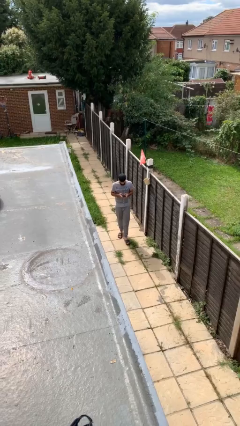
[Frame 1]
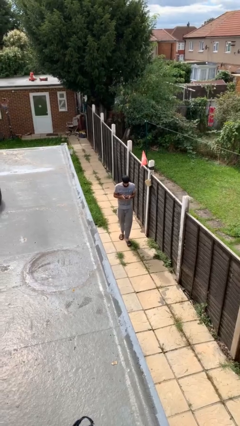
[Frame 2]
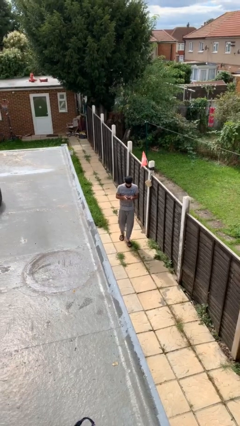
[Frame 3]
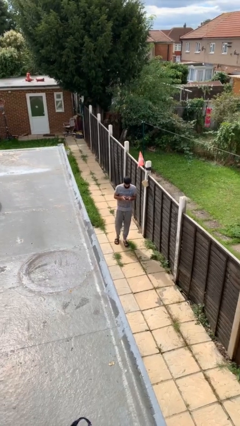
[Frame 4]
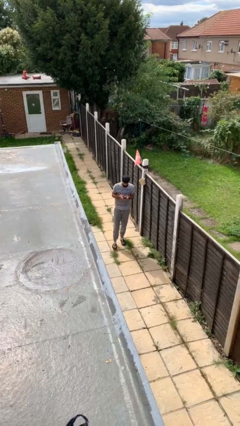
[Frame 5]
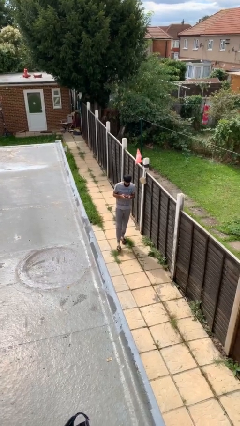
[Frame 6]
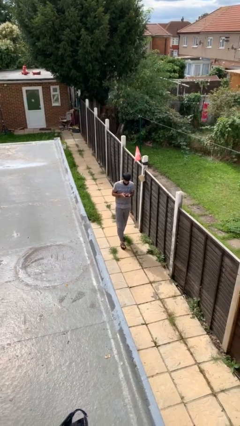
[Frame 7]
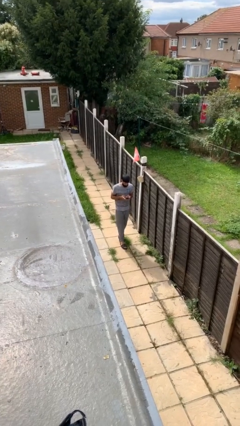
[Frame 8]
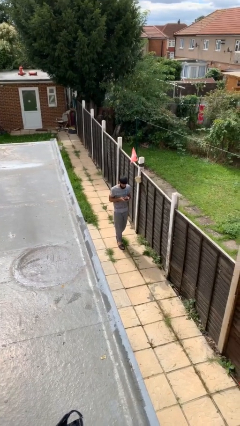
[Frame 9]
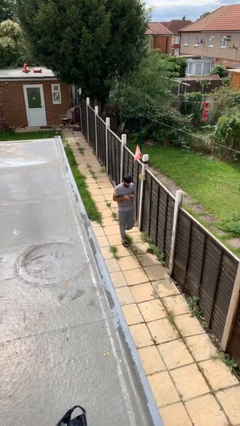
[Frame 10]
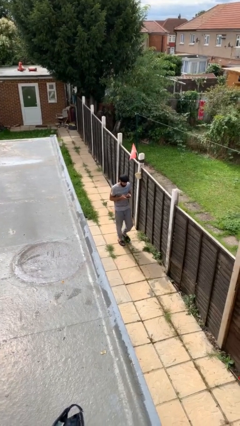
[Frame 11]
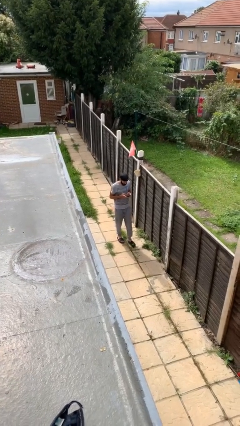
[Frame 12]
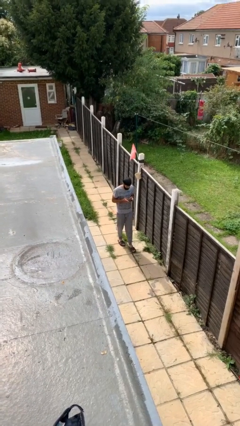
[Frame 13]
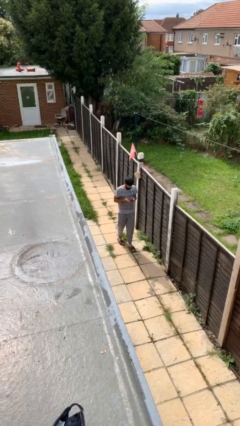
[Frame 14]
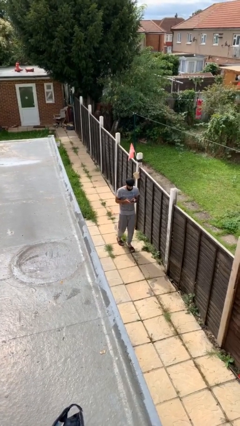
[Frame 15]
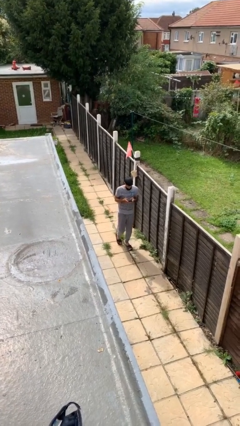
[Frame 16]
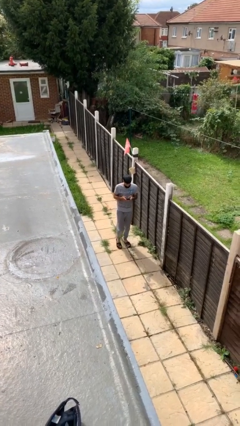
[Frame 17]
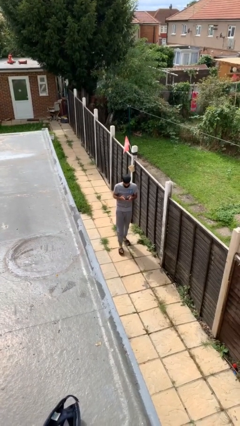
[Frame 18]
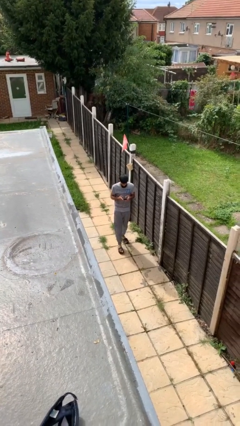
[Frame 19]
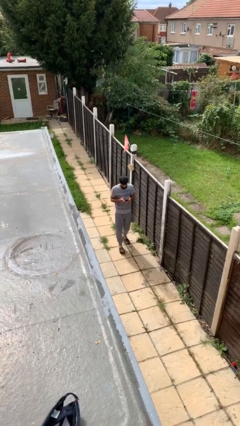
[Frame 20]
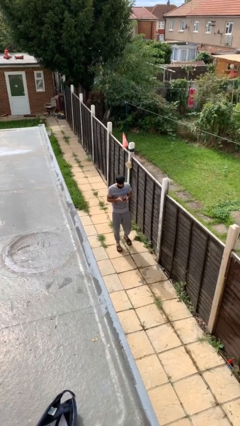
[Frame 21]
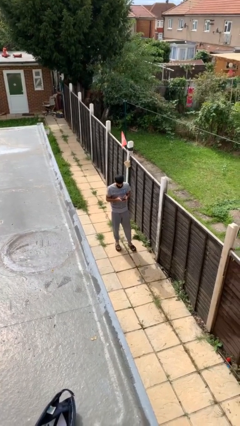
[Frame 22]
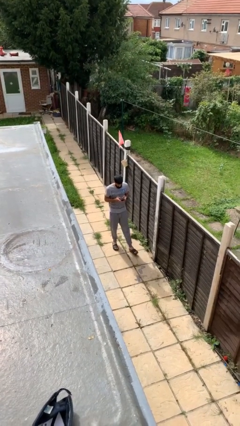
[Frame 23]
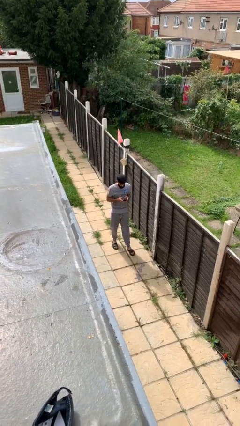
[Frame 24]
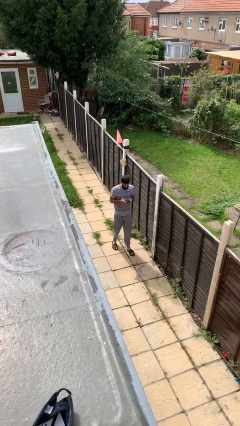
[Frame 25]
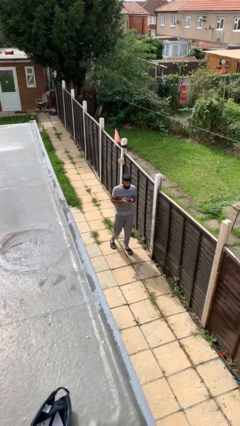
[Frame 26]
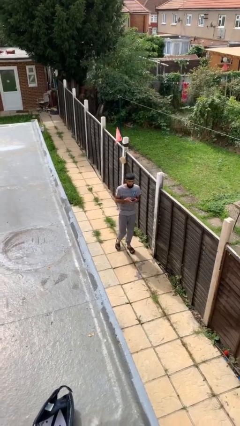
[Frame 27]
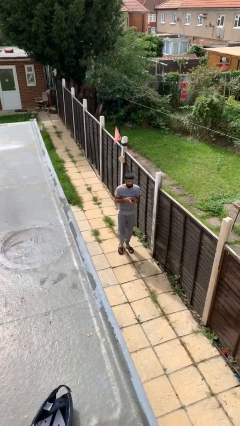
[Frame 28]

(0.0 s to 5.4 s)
person texts on phone

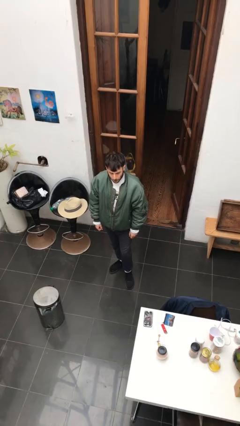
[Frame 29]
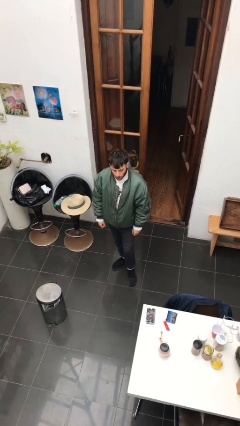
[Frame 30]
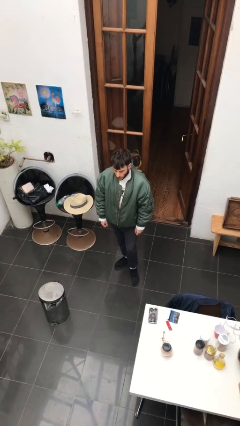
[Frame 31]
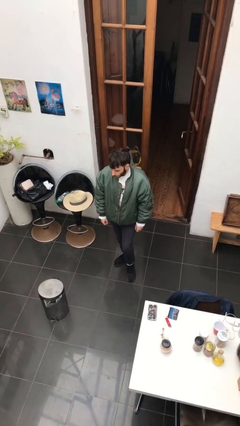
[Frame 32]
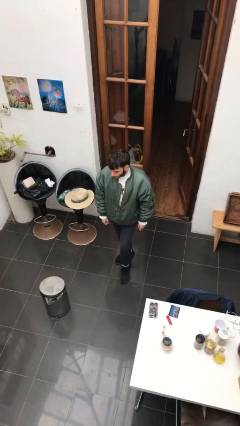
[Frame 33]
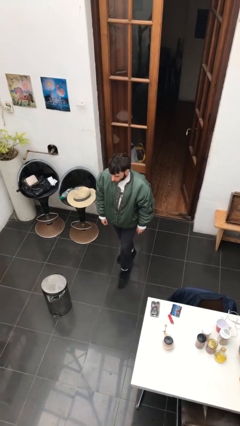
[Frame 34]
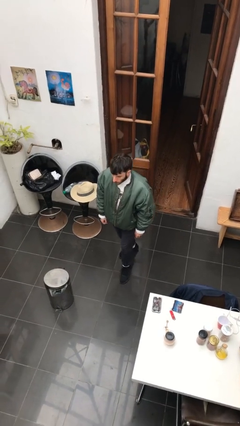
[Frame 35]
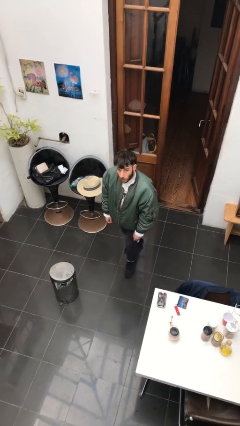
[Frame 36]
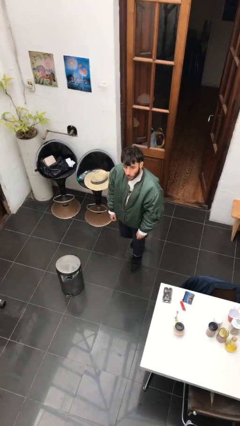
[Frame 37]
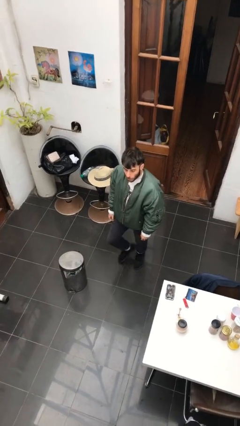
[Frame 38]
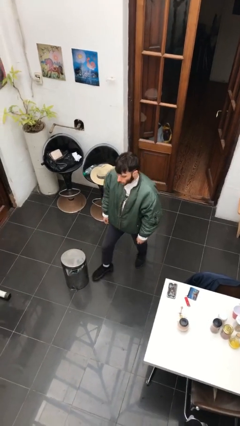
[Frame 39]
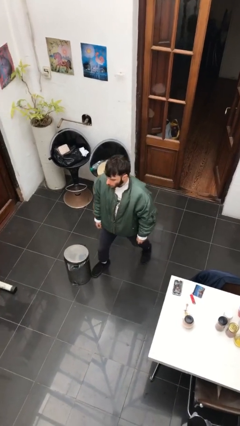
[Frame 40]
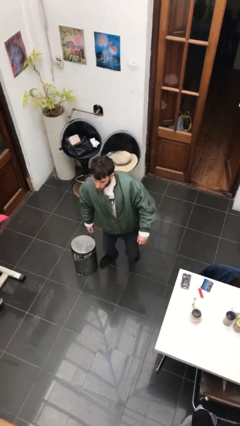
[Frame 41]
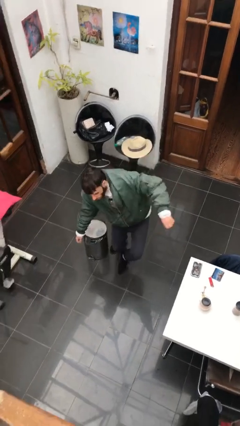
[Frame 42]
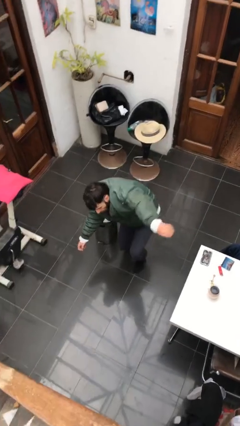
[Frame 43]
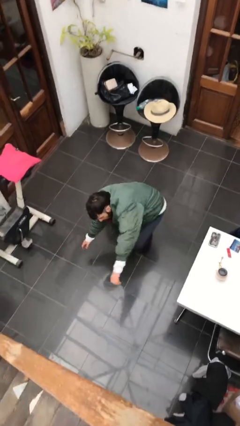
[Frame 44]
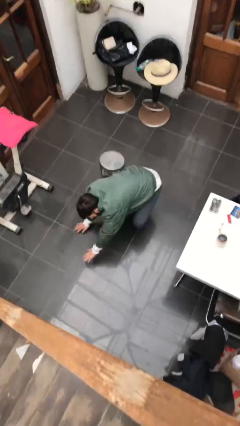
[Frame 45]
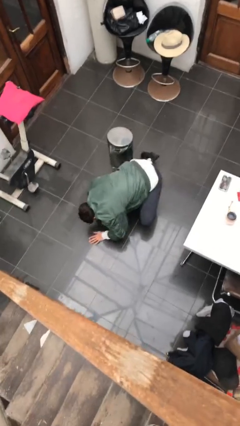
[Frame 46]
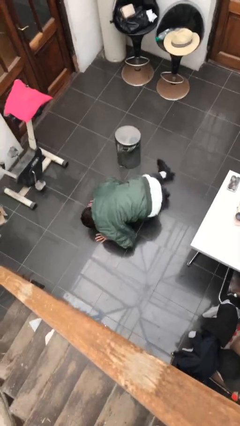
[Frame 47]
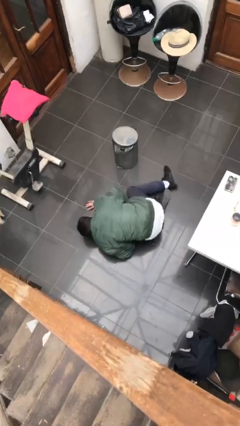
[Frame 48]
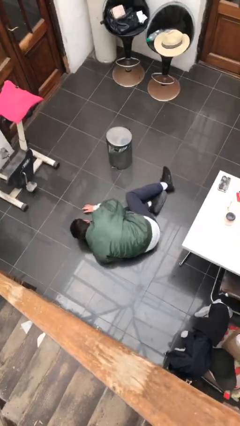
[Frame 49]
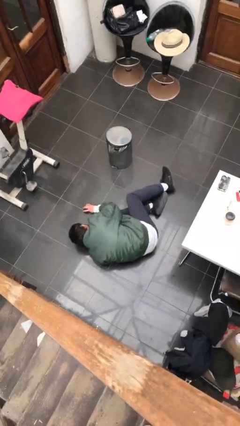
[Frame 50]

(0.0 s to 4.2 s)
person trips on object on floor

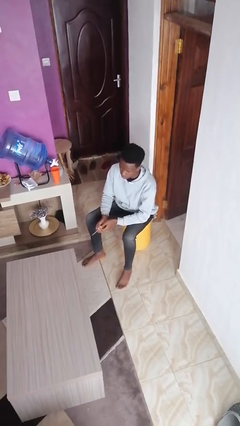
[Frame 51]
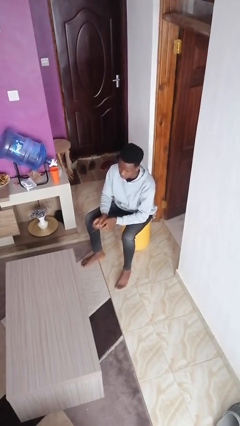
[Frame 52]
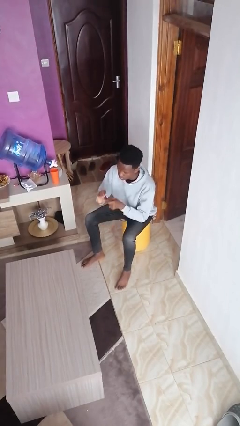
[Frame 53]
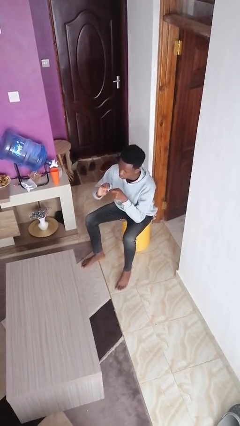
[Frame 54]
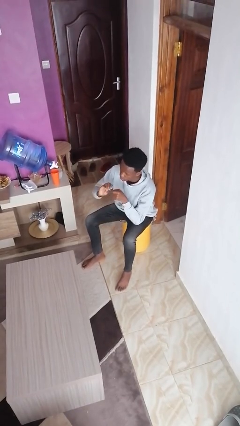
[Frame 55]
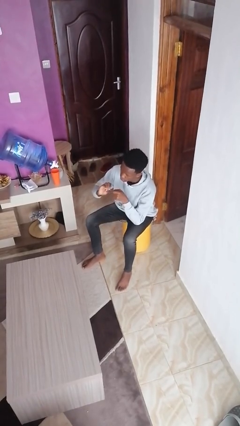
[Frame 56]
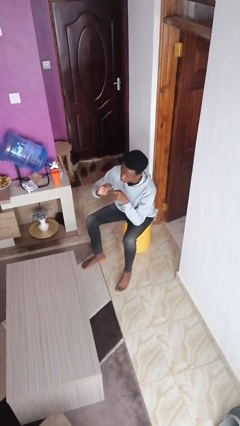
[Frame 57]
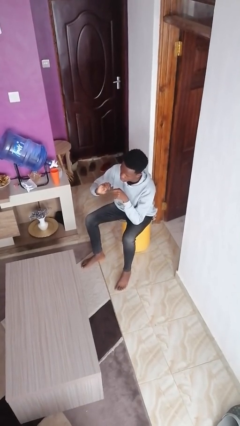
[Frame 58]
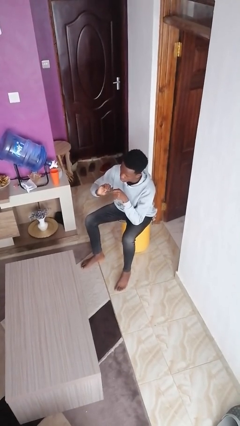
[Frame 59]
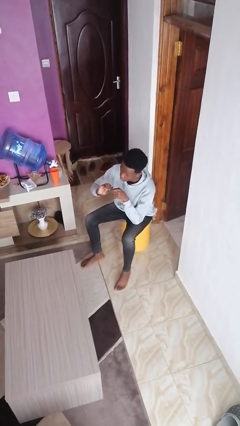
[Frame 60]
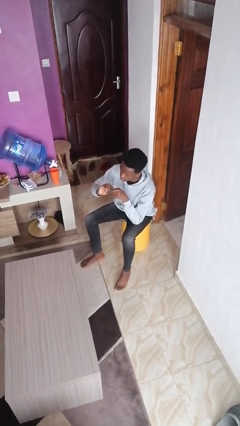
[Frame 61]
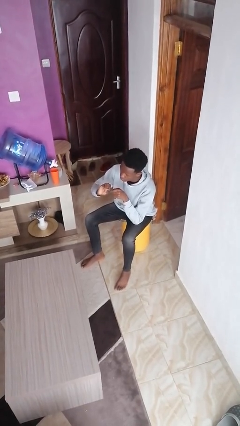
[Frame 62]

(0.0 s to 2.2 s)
person files fingernails

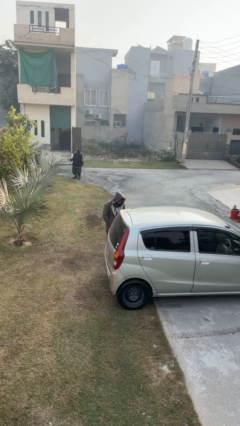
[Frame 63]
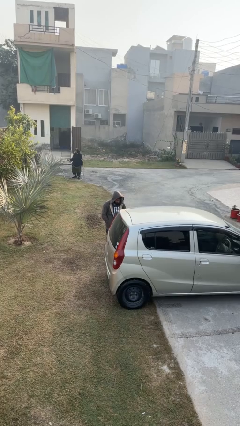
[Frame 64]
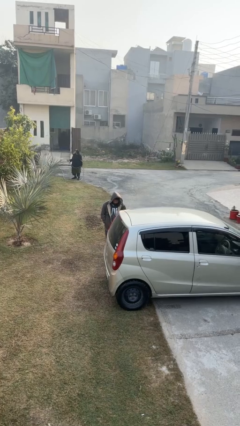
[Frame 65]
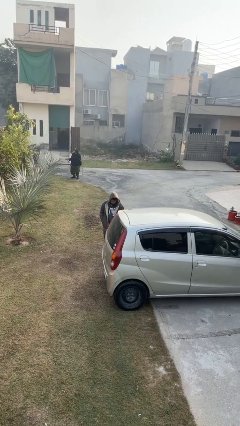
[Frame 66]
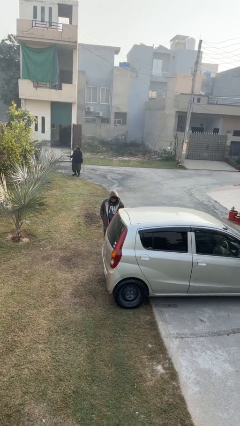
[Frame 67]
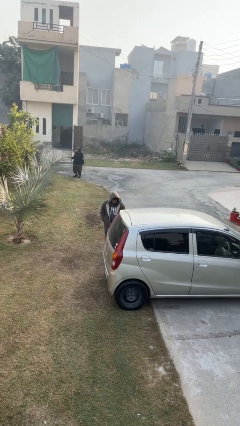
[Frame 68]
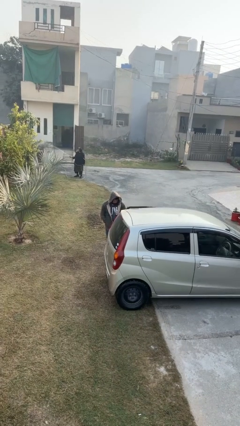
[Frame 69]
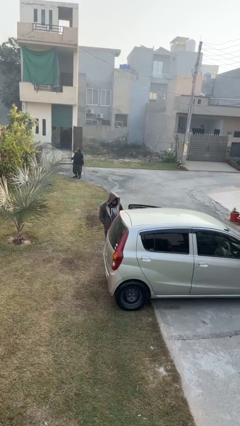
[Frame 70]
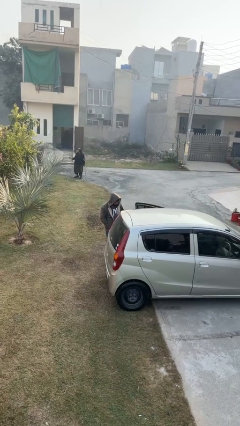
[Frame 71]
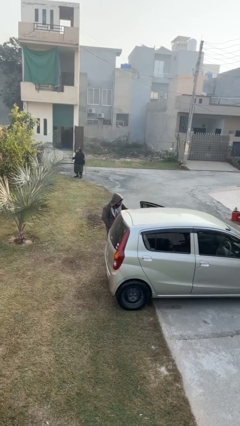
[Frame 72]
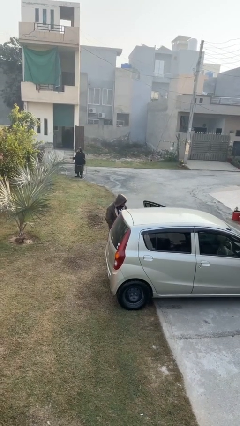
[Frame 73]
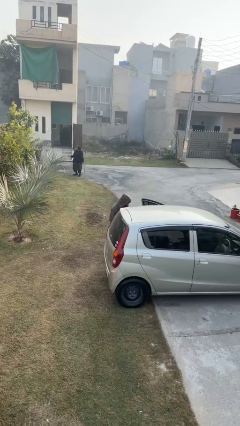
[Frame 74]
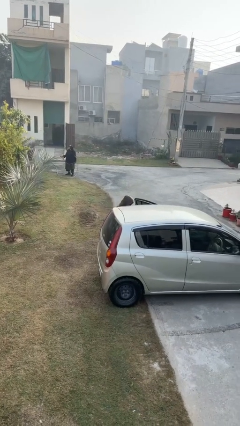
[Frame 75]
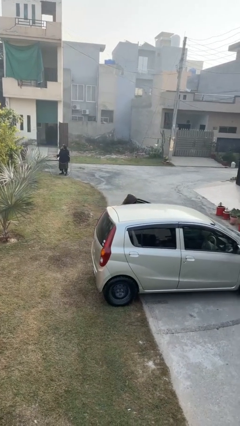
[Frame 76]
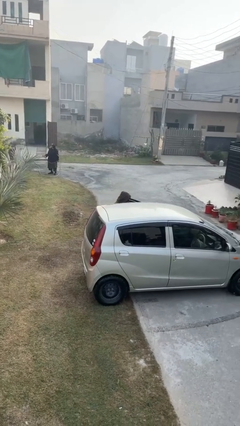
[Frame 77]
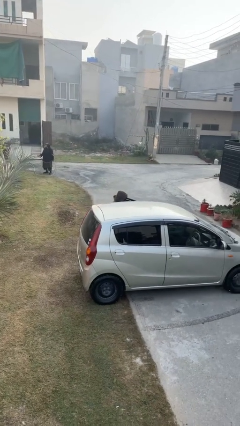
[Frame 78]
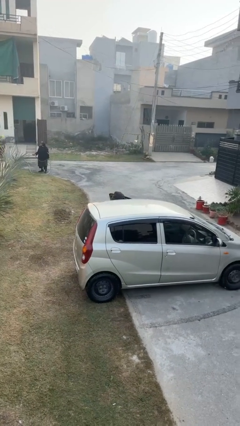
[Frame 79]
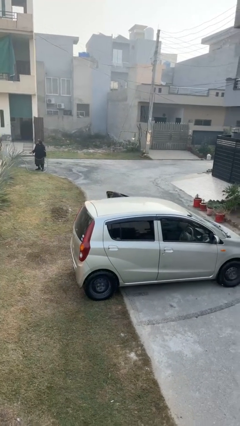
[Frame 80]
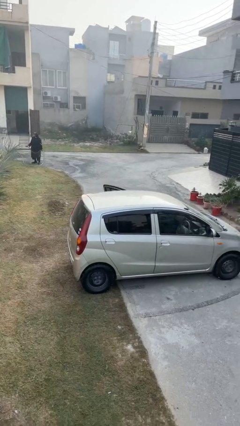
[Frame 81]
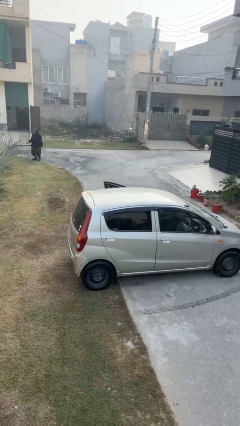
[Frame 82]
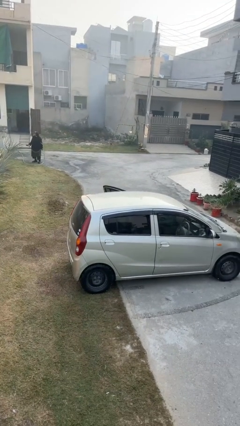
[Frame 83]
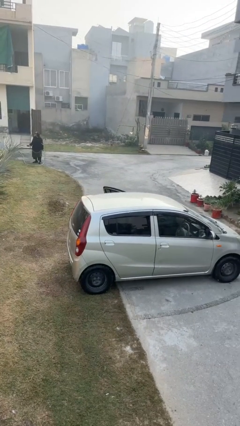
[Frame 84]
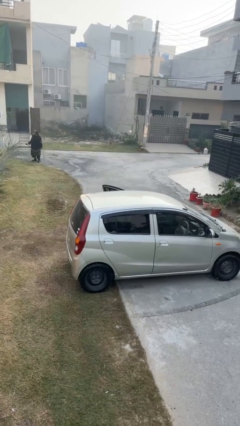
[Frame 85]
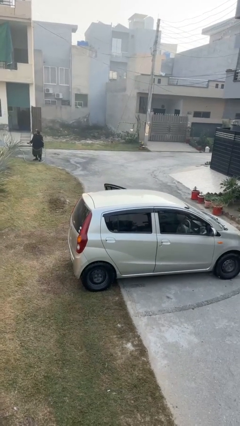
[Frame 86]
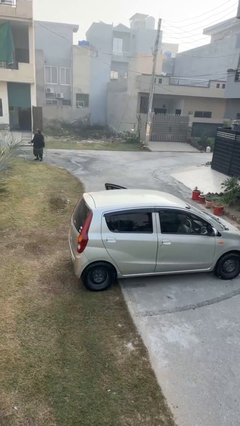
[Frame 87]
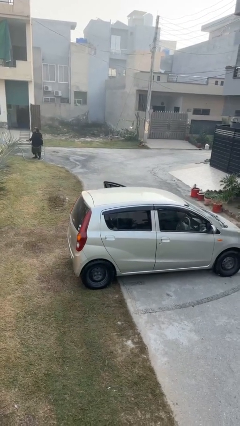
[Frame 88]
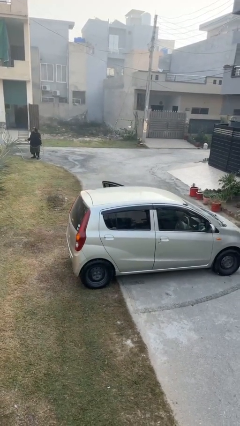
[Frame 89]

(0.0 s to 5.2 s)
person enters car

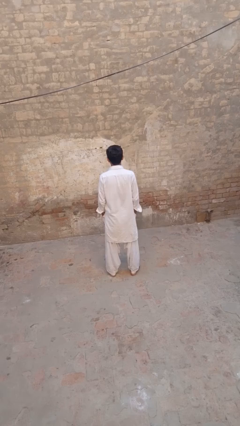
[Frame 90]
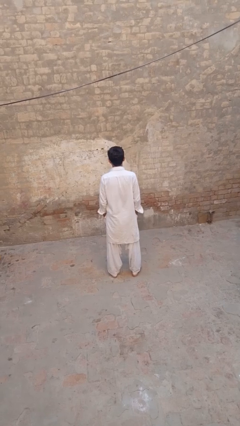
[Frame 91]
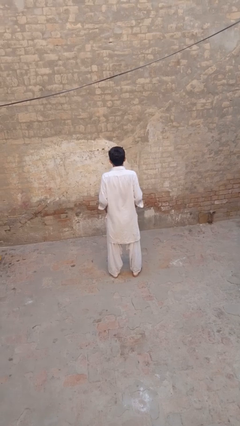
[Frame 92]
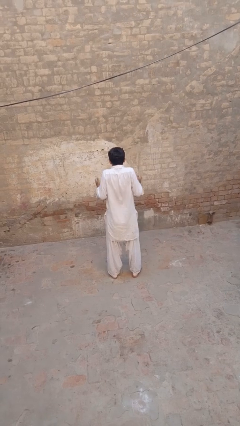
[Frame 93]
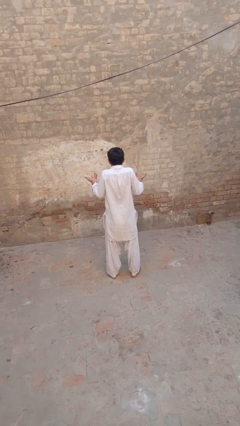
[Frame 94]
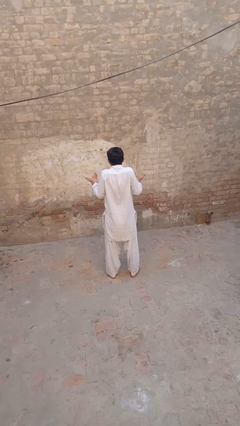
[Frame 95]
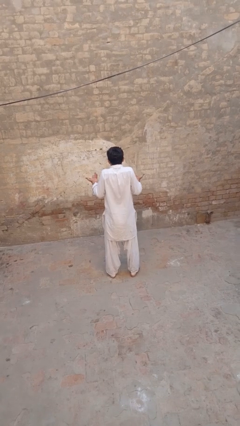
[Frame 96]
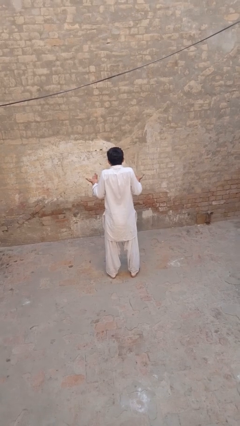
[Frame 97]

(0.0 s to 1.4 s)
person shrugs
